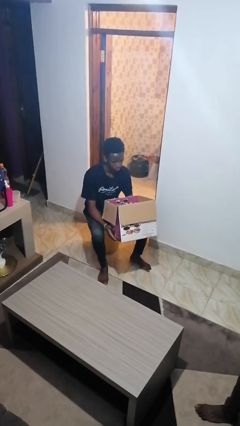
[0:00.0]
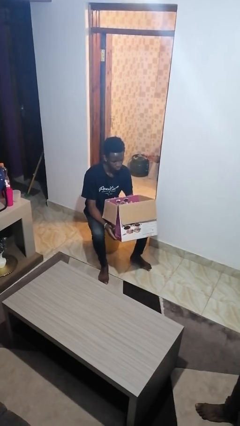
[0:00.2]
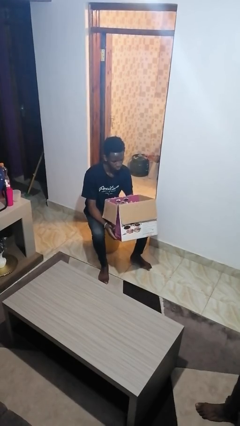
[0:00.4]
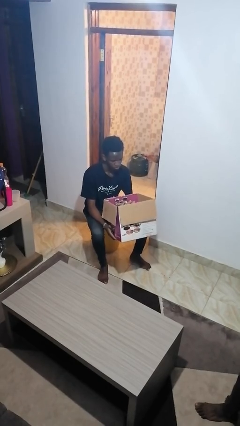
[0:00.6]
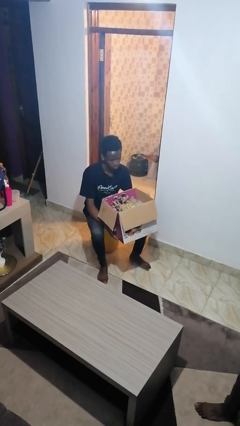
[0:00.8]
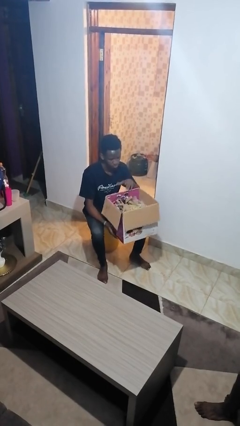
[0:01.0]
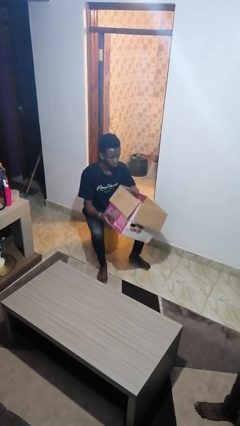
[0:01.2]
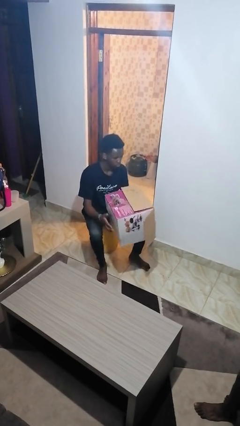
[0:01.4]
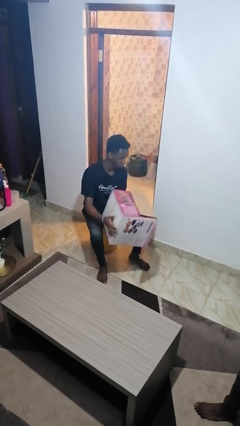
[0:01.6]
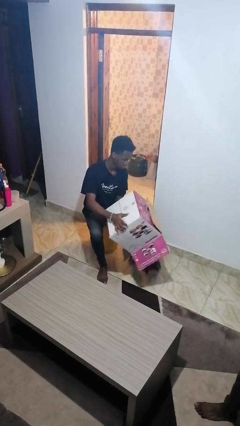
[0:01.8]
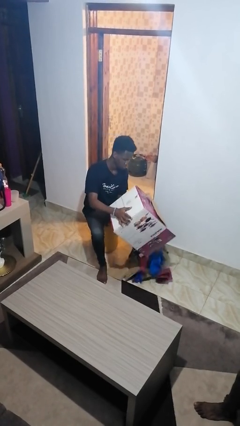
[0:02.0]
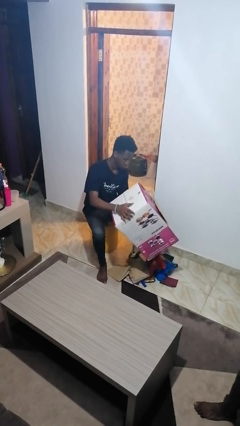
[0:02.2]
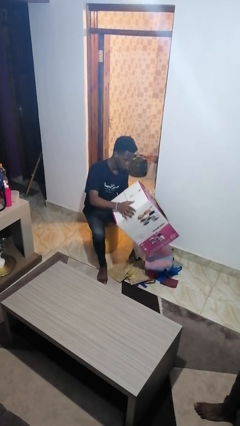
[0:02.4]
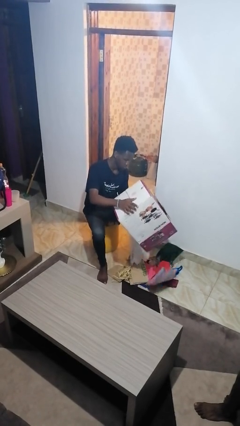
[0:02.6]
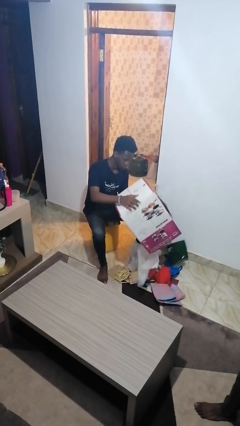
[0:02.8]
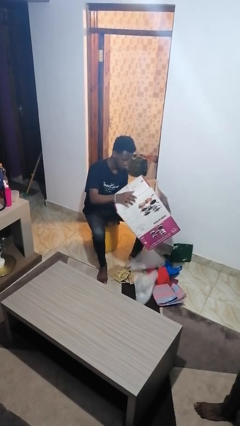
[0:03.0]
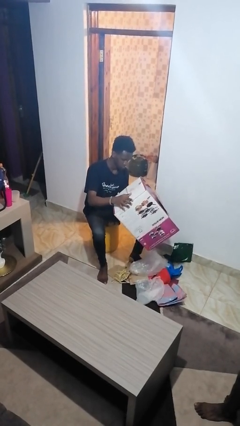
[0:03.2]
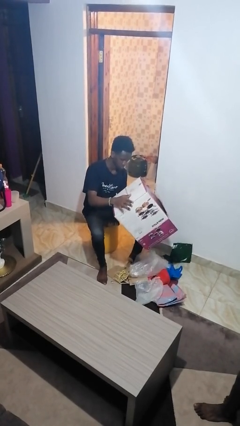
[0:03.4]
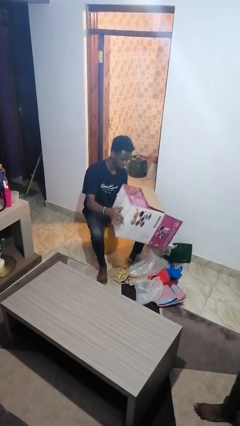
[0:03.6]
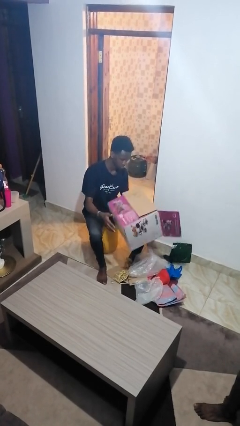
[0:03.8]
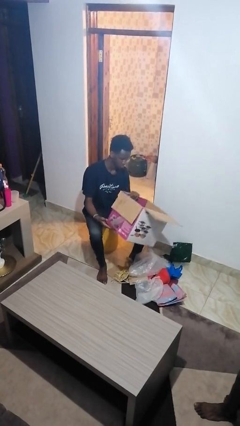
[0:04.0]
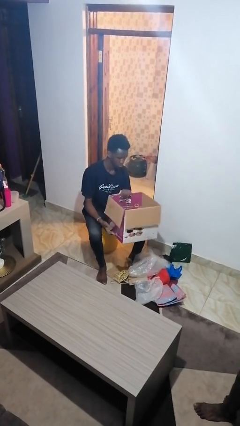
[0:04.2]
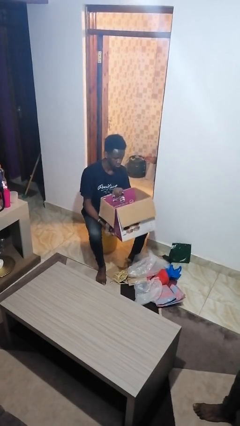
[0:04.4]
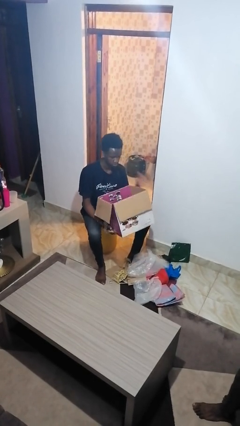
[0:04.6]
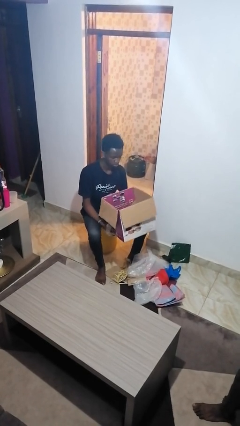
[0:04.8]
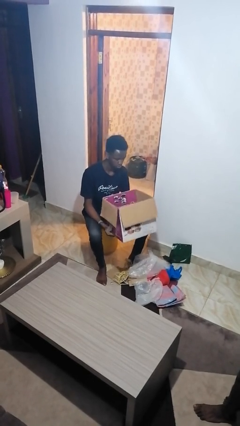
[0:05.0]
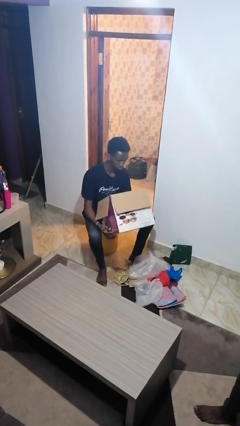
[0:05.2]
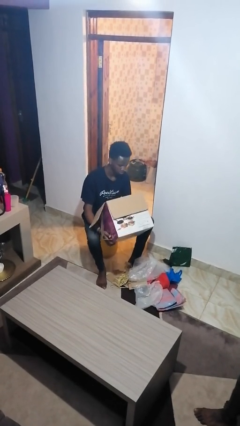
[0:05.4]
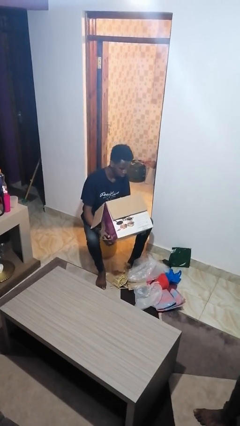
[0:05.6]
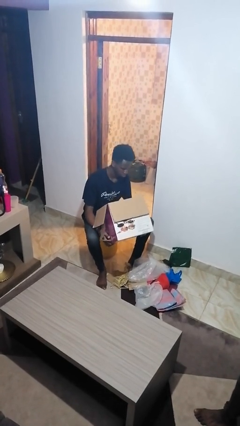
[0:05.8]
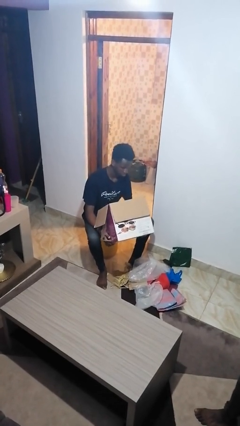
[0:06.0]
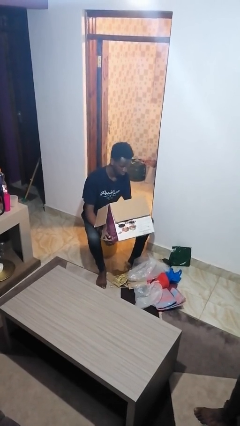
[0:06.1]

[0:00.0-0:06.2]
person unloads box onto floor

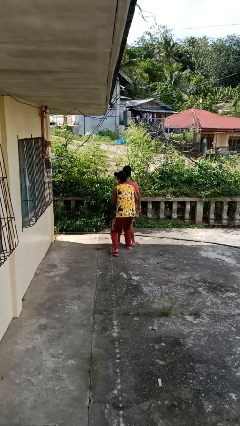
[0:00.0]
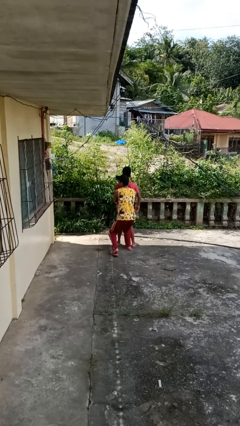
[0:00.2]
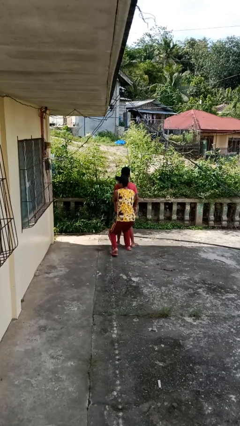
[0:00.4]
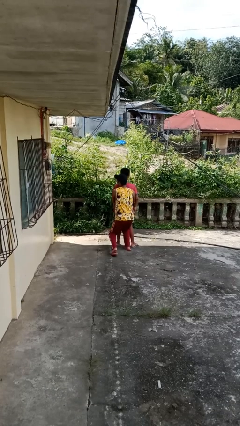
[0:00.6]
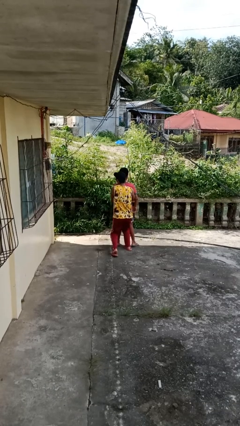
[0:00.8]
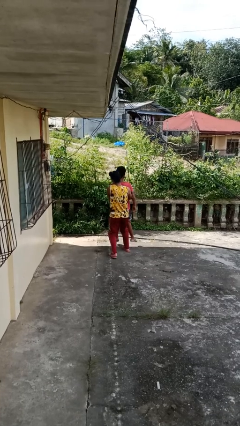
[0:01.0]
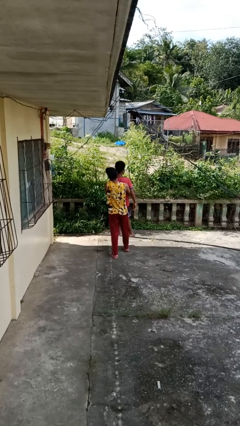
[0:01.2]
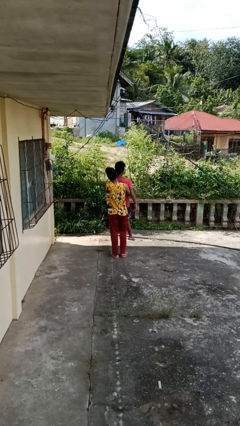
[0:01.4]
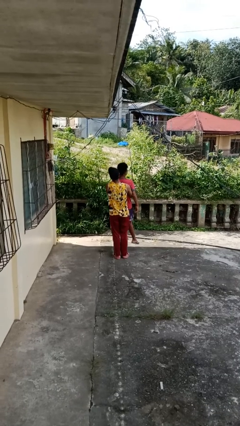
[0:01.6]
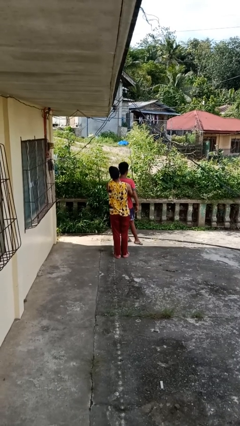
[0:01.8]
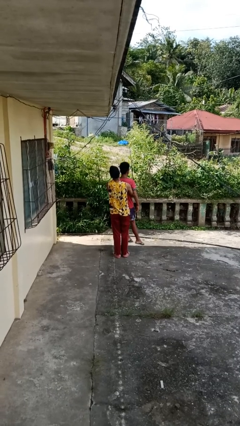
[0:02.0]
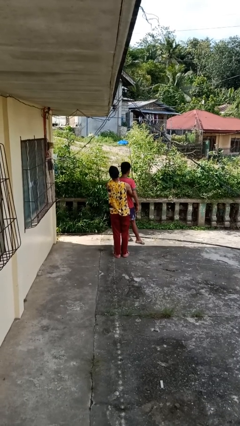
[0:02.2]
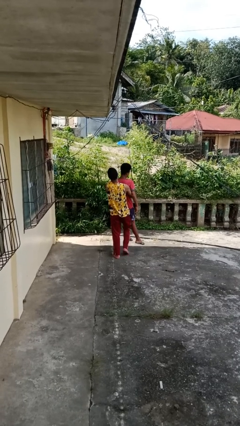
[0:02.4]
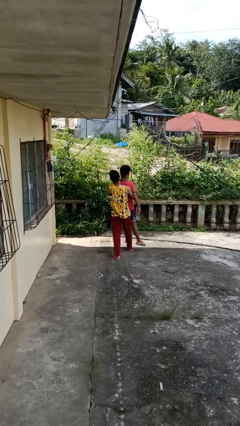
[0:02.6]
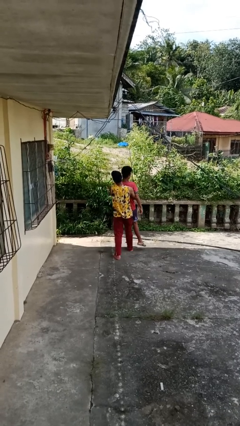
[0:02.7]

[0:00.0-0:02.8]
person picks up person

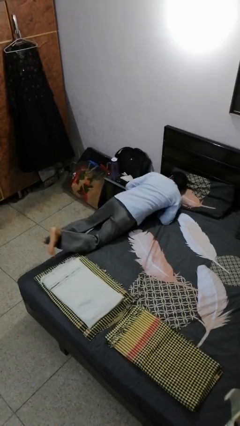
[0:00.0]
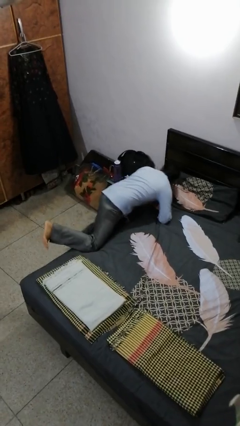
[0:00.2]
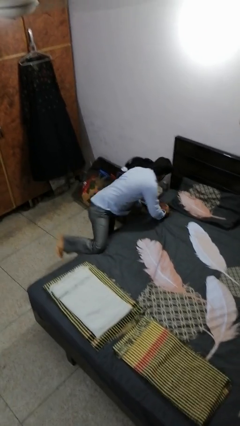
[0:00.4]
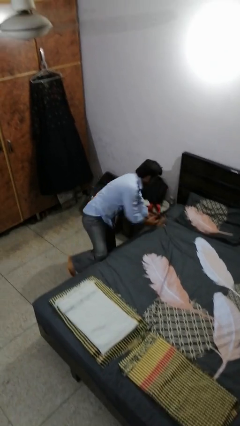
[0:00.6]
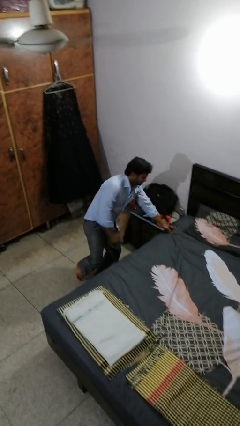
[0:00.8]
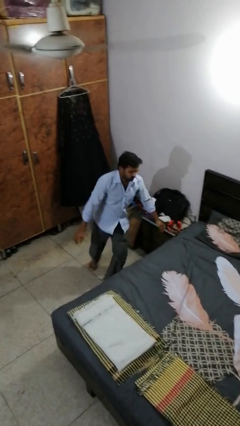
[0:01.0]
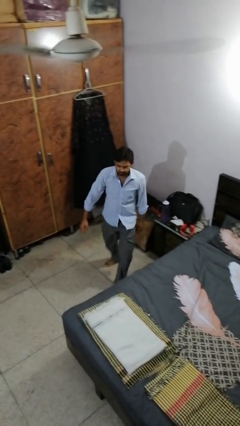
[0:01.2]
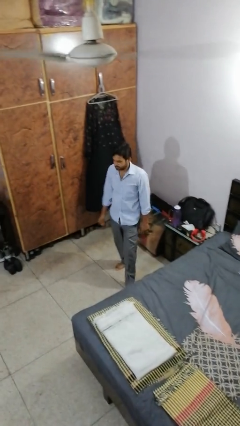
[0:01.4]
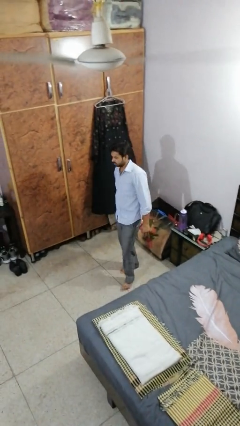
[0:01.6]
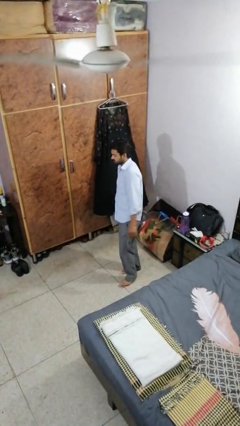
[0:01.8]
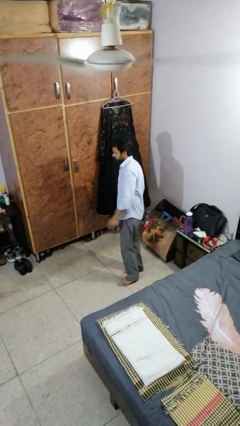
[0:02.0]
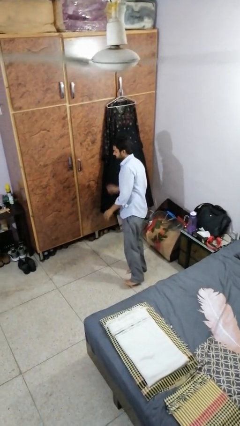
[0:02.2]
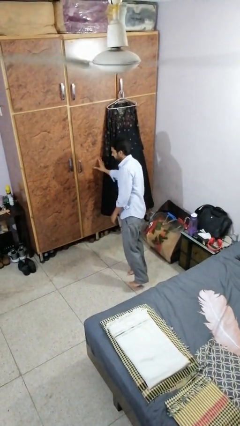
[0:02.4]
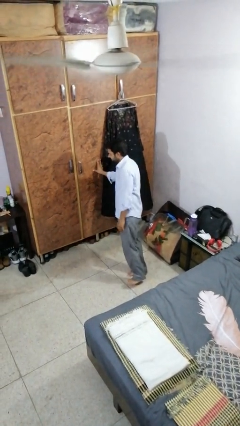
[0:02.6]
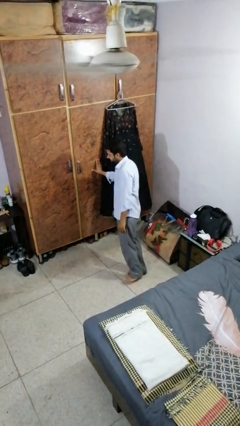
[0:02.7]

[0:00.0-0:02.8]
person stands up

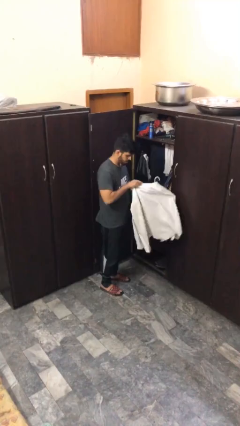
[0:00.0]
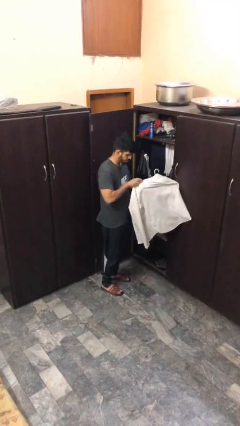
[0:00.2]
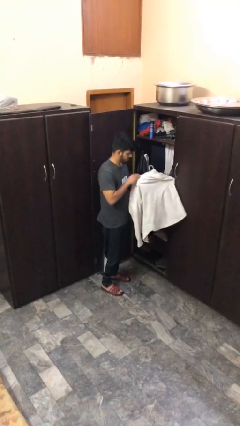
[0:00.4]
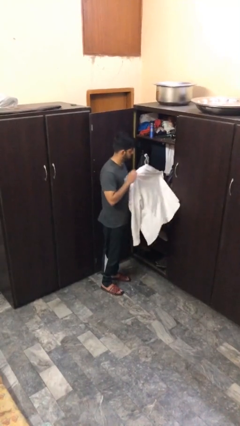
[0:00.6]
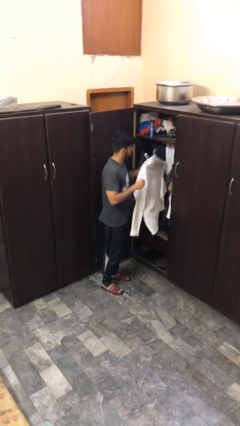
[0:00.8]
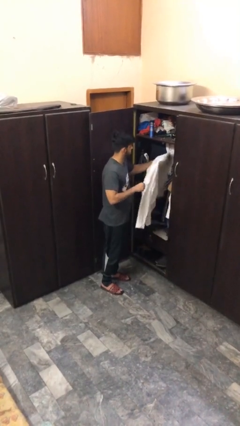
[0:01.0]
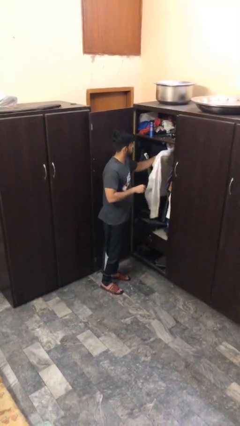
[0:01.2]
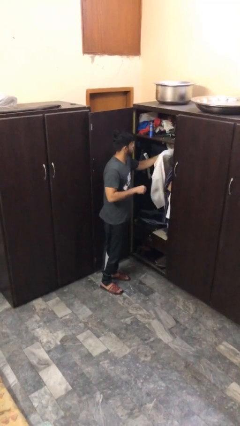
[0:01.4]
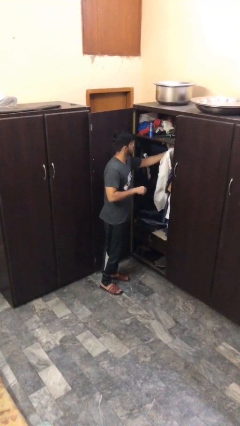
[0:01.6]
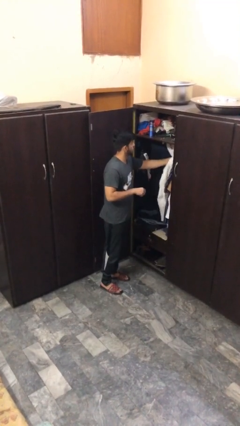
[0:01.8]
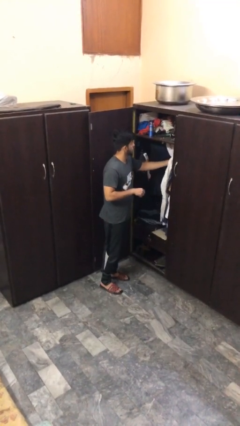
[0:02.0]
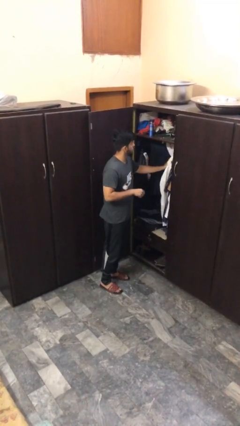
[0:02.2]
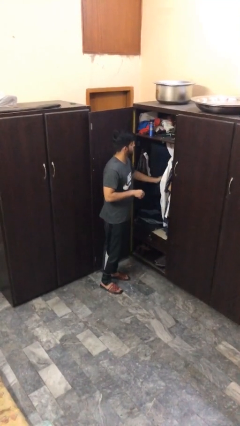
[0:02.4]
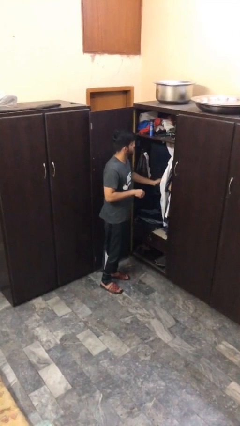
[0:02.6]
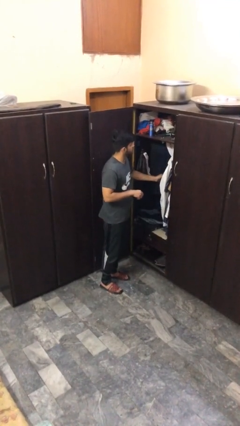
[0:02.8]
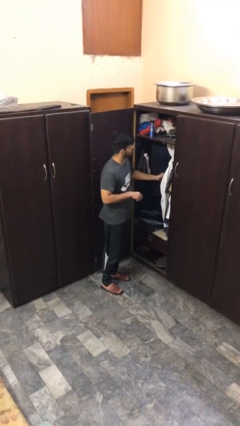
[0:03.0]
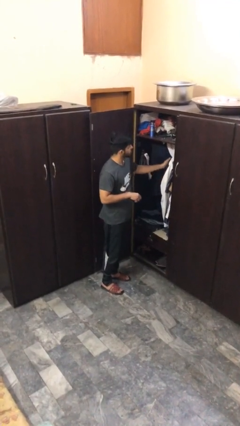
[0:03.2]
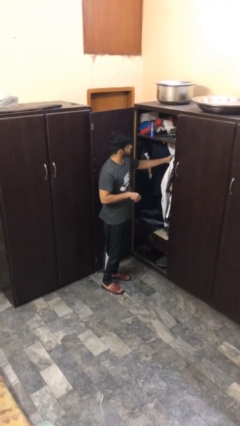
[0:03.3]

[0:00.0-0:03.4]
person puts clothes into closet

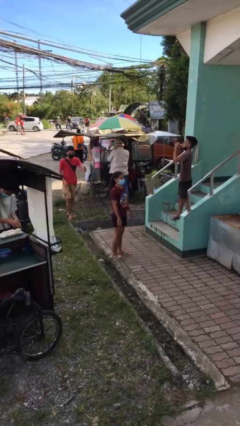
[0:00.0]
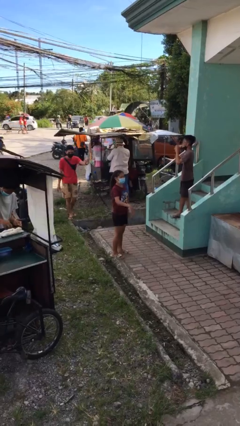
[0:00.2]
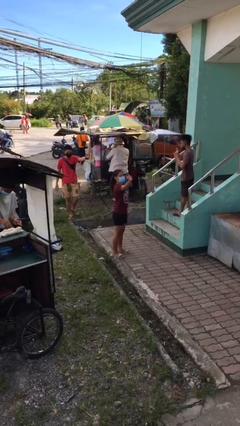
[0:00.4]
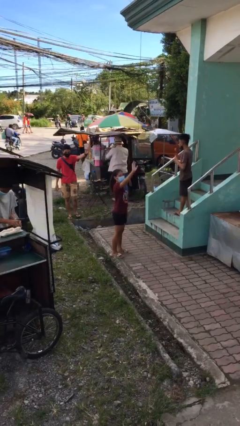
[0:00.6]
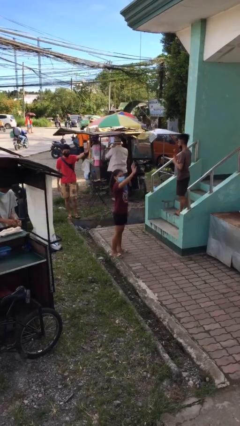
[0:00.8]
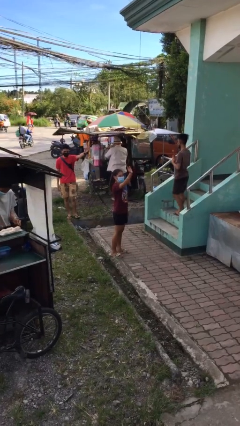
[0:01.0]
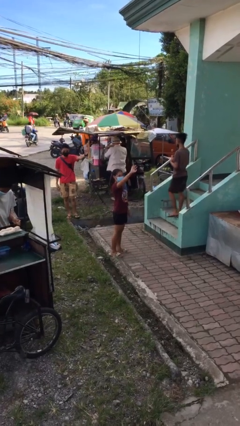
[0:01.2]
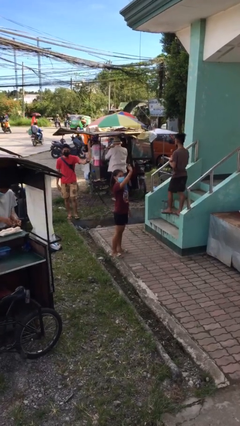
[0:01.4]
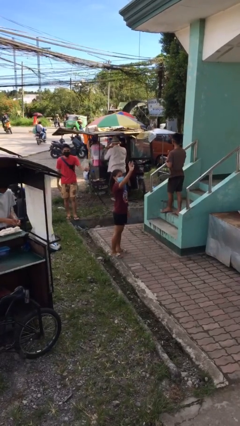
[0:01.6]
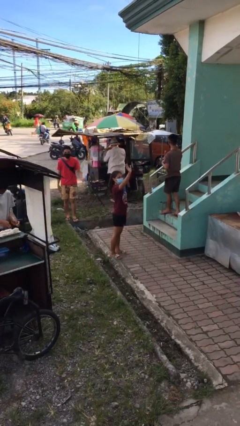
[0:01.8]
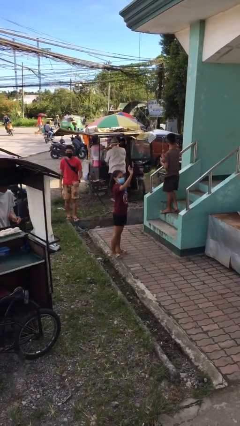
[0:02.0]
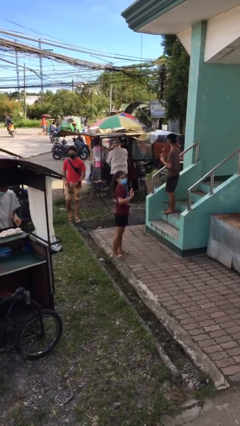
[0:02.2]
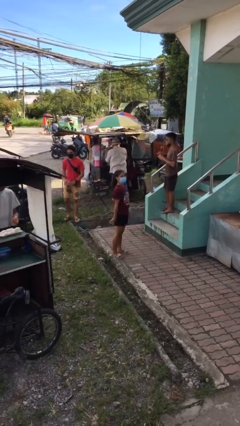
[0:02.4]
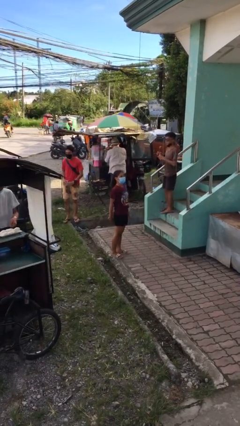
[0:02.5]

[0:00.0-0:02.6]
person waves at person
